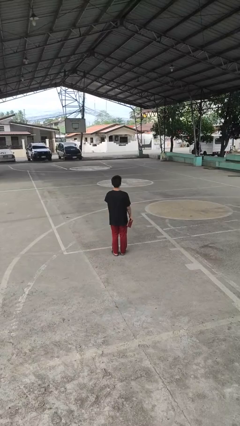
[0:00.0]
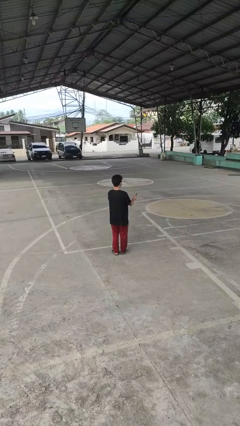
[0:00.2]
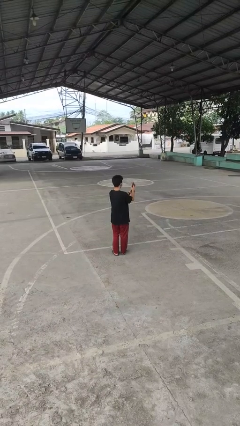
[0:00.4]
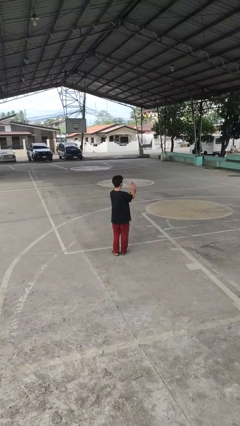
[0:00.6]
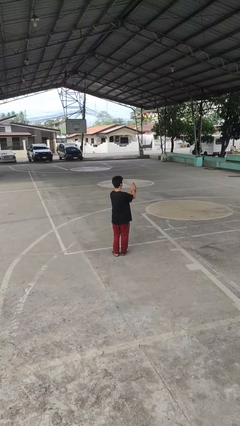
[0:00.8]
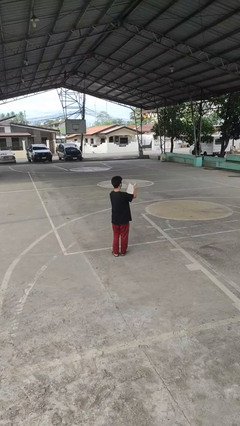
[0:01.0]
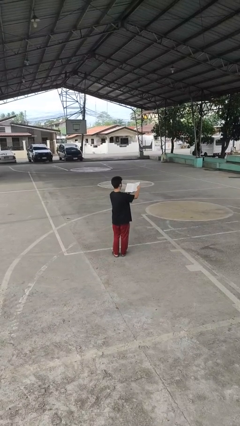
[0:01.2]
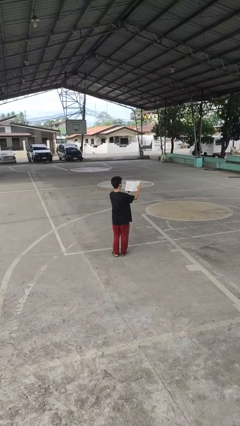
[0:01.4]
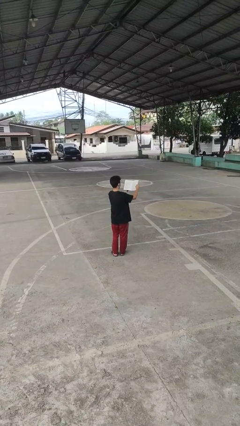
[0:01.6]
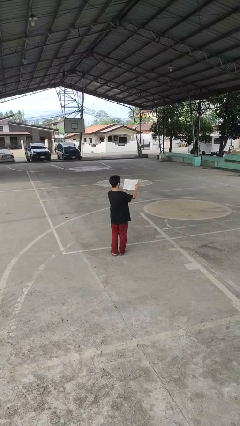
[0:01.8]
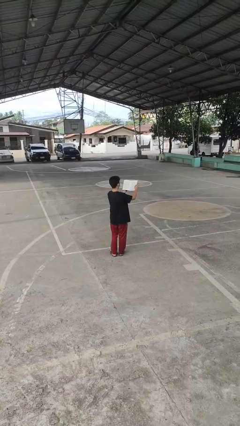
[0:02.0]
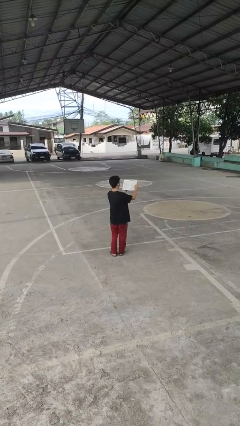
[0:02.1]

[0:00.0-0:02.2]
person reads book

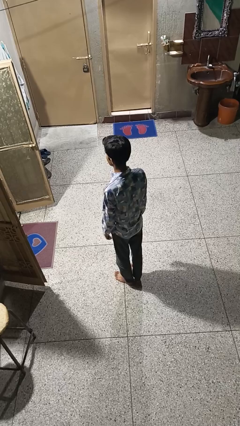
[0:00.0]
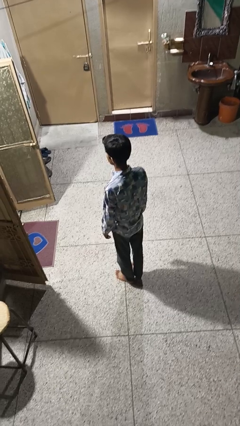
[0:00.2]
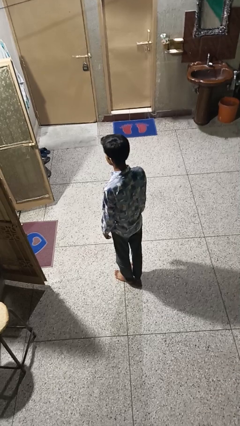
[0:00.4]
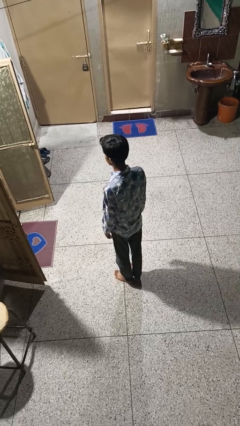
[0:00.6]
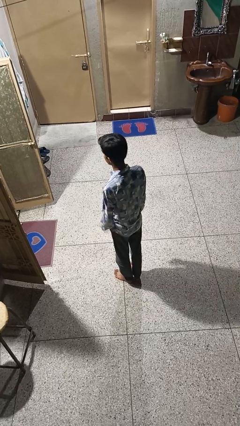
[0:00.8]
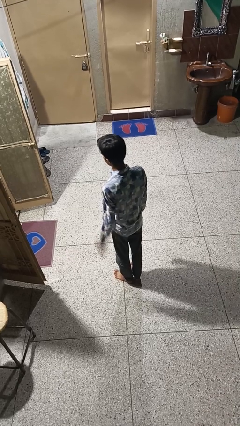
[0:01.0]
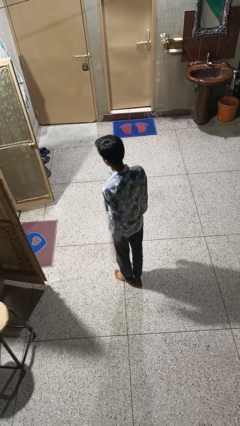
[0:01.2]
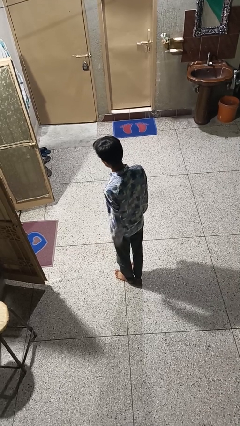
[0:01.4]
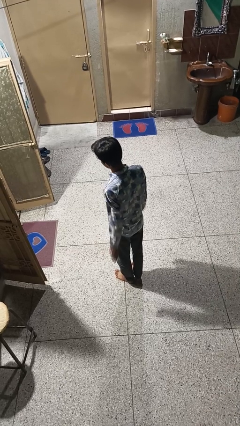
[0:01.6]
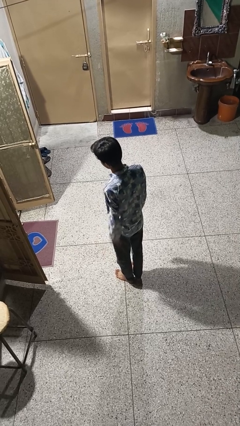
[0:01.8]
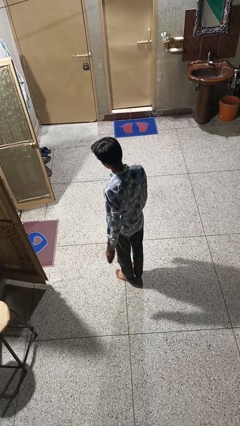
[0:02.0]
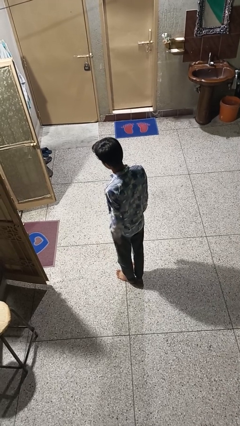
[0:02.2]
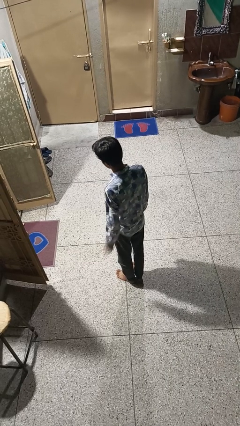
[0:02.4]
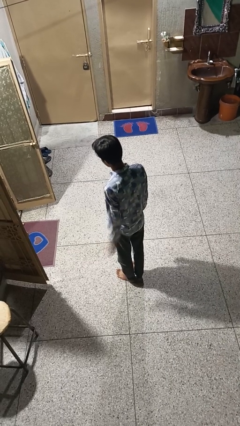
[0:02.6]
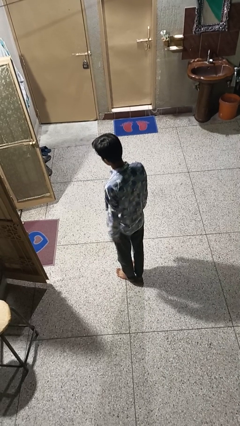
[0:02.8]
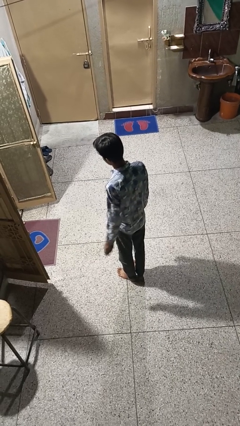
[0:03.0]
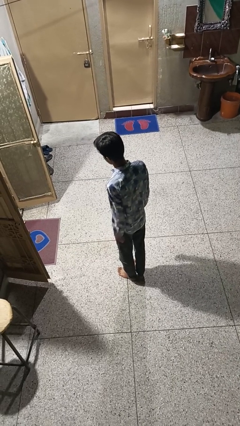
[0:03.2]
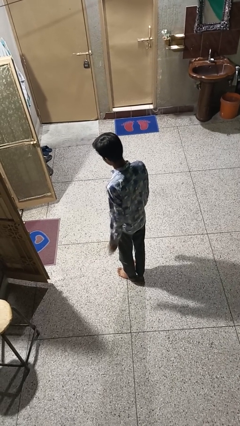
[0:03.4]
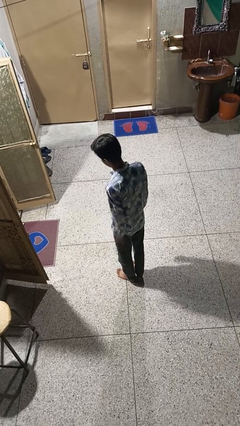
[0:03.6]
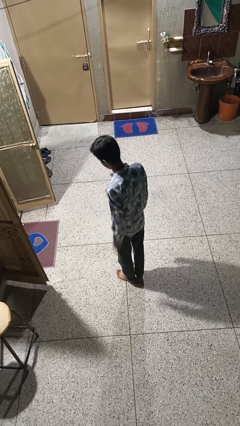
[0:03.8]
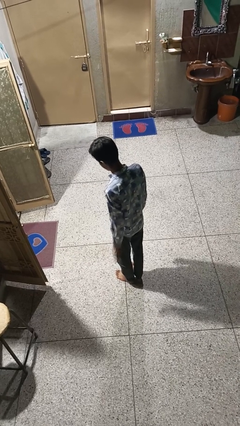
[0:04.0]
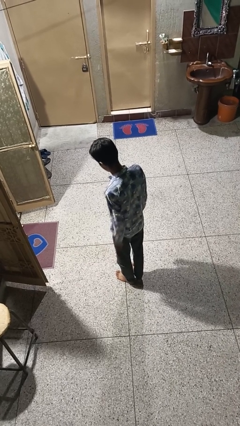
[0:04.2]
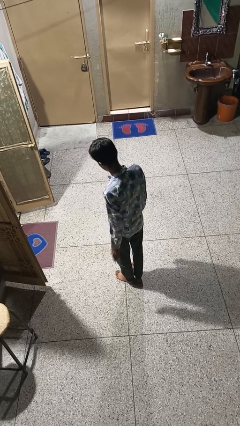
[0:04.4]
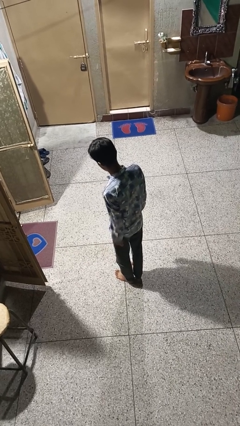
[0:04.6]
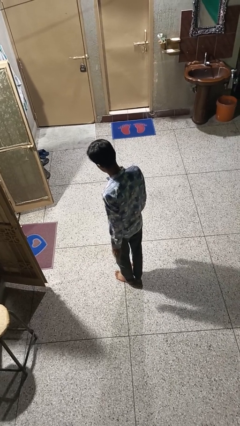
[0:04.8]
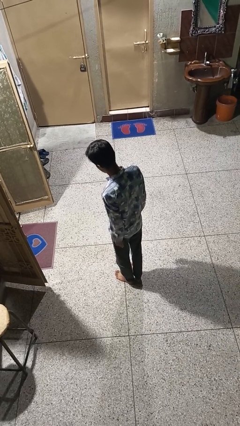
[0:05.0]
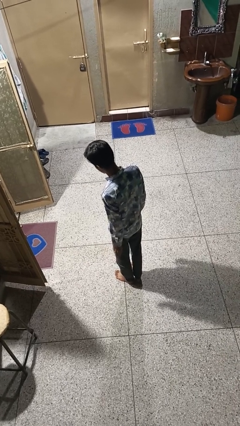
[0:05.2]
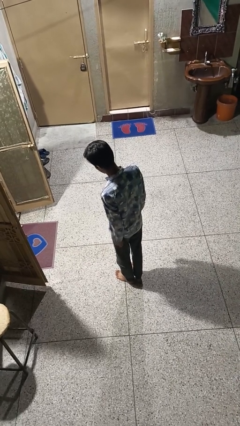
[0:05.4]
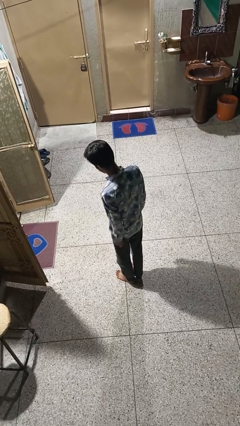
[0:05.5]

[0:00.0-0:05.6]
person slaps hands on thighs

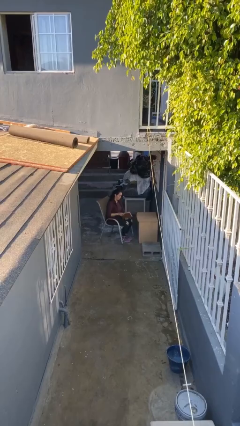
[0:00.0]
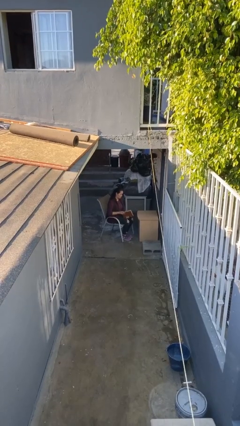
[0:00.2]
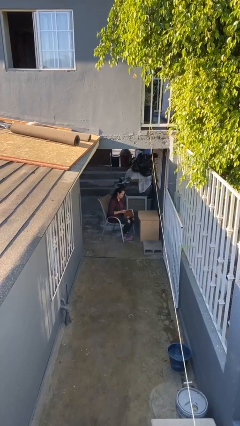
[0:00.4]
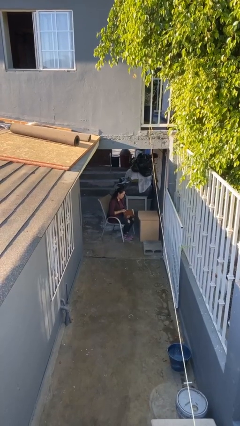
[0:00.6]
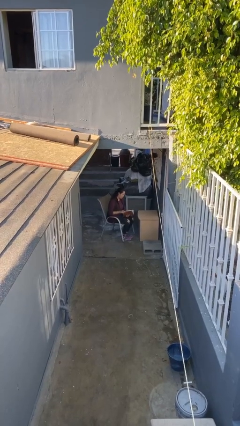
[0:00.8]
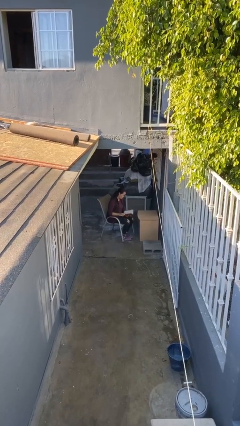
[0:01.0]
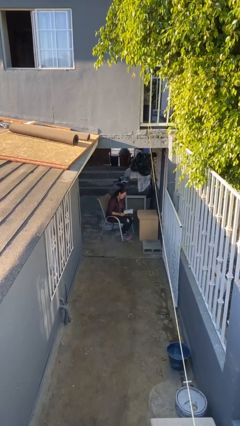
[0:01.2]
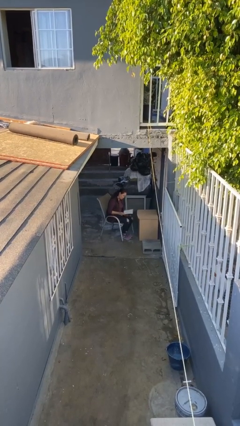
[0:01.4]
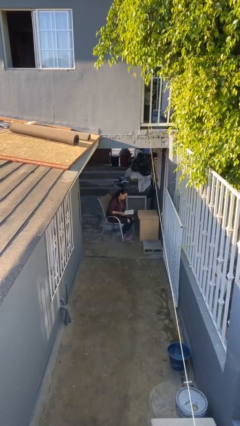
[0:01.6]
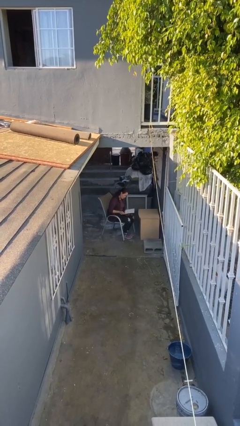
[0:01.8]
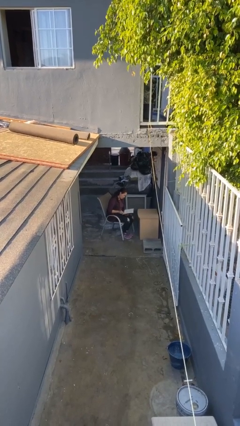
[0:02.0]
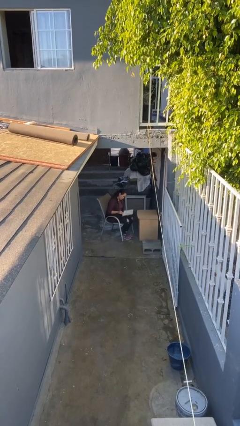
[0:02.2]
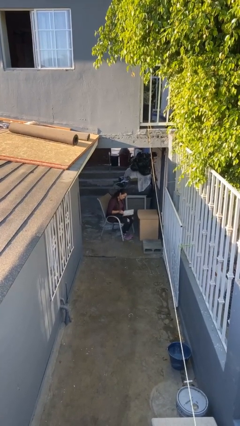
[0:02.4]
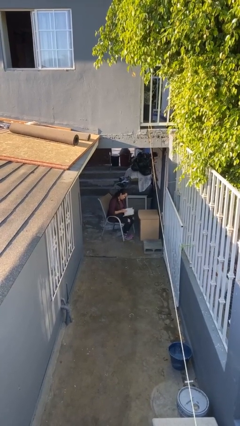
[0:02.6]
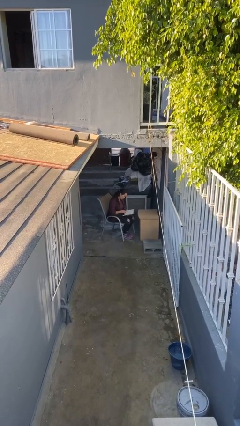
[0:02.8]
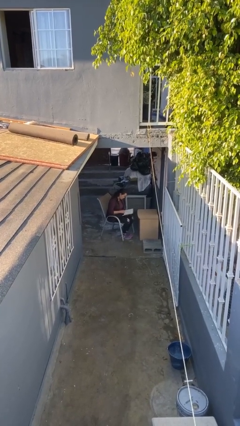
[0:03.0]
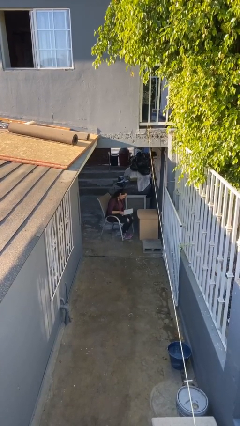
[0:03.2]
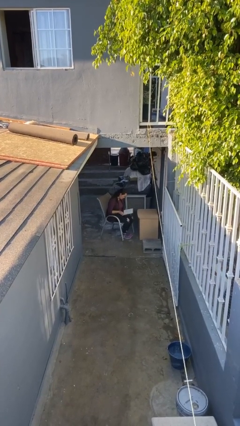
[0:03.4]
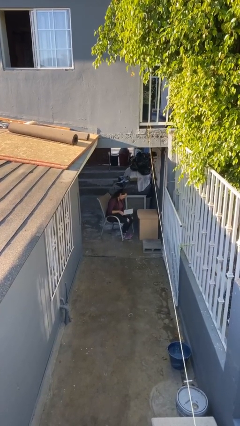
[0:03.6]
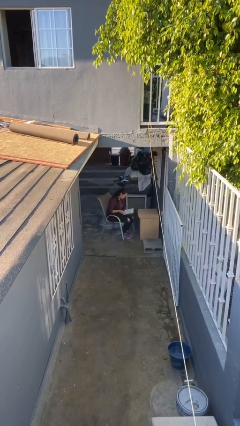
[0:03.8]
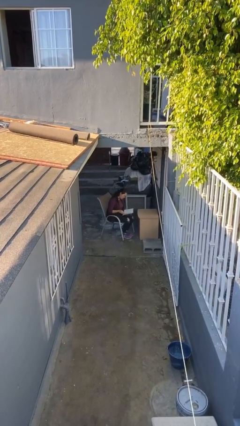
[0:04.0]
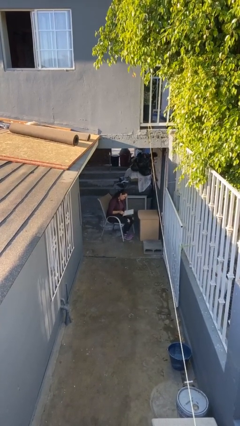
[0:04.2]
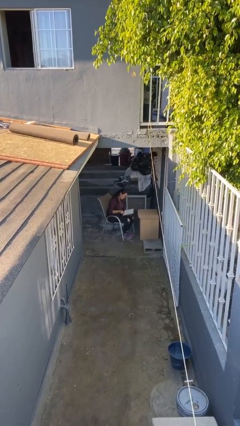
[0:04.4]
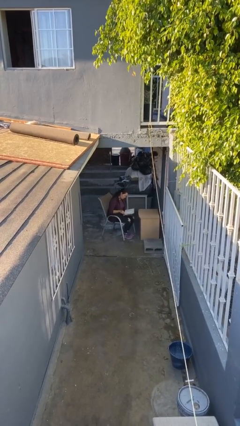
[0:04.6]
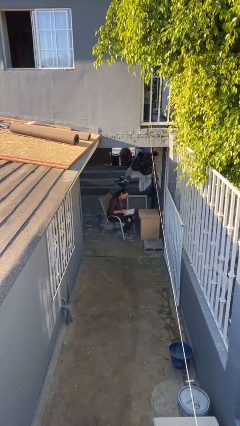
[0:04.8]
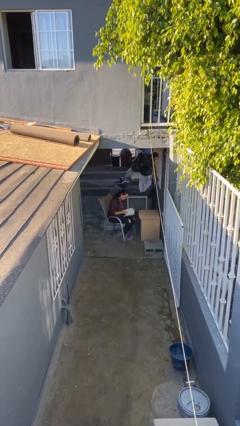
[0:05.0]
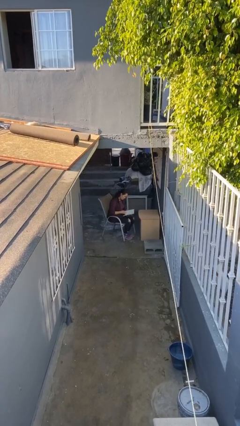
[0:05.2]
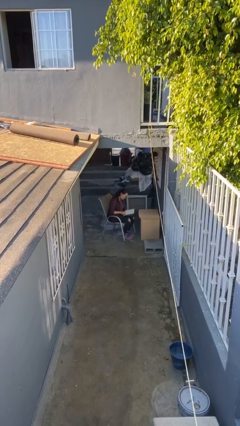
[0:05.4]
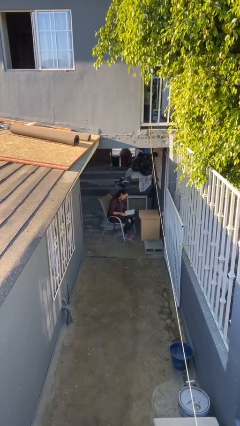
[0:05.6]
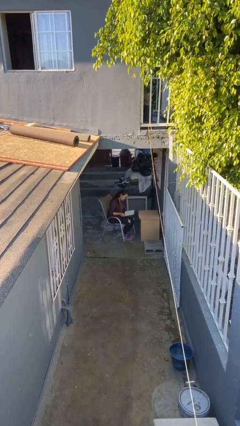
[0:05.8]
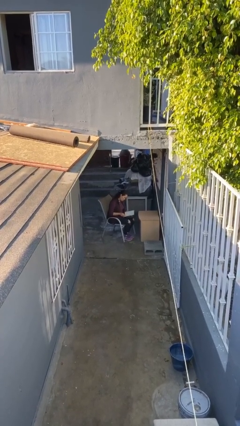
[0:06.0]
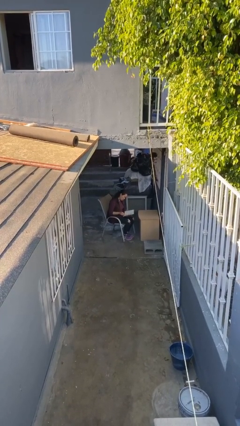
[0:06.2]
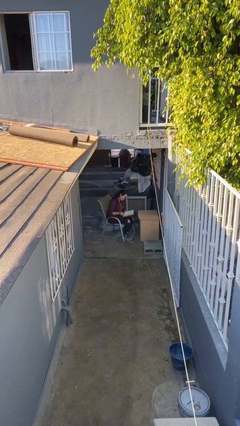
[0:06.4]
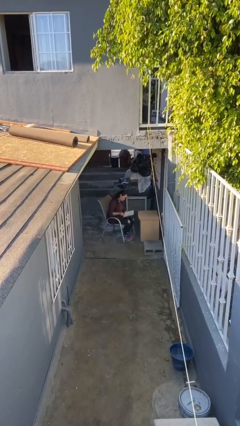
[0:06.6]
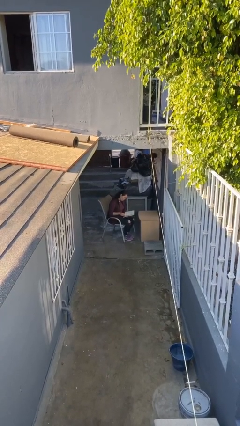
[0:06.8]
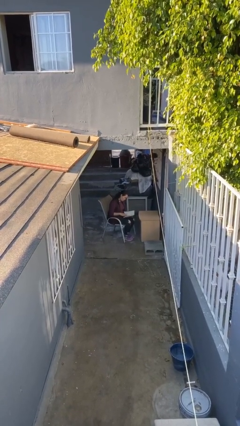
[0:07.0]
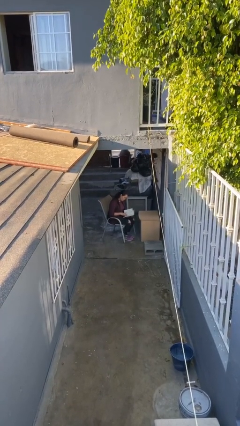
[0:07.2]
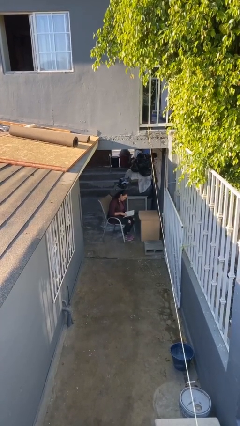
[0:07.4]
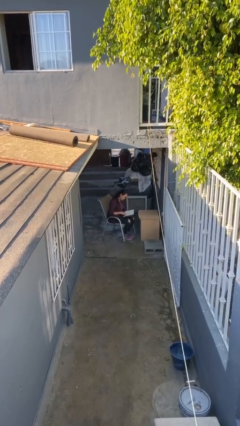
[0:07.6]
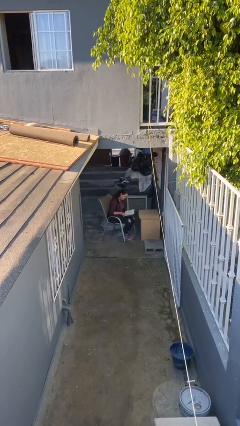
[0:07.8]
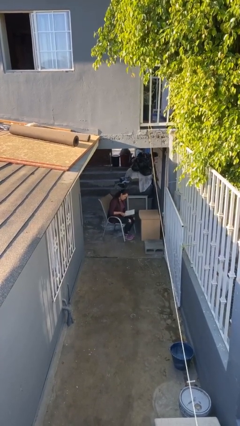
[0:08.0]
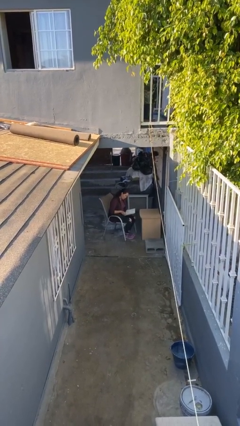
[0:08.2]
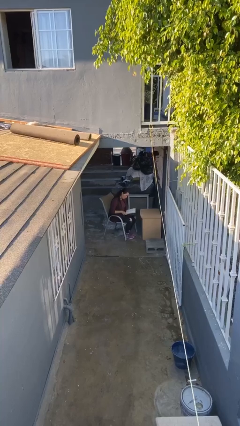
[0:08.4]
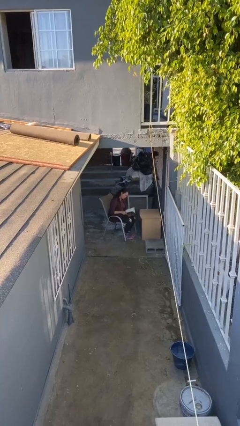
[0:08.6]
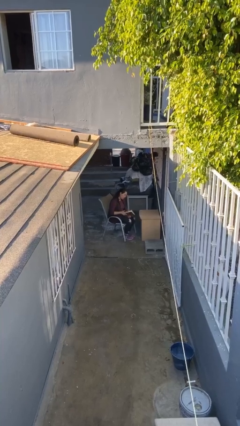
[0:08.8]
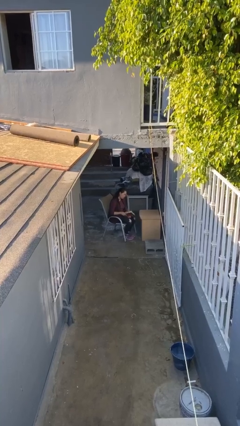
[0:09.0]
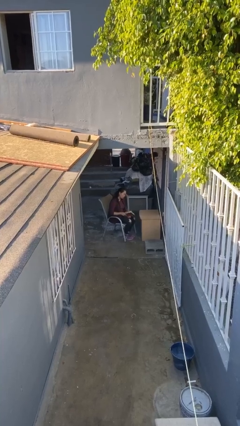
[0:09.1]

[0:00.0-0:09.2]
person reads document

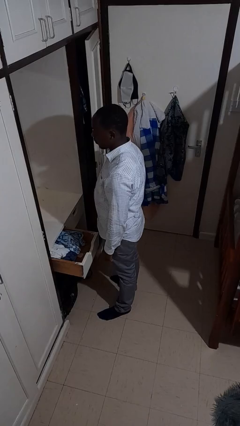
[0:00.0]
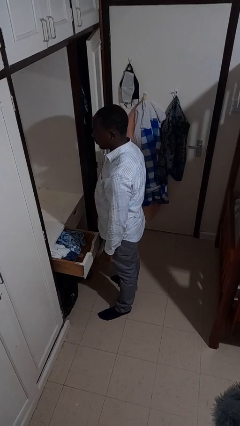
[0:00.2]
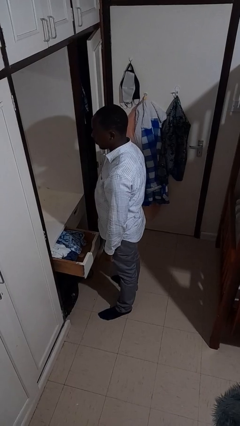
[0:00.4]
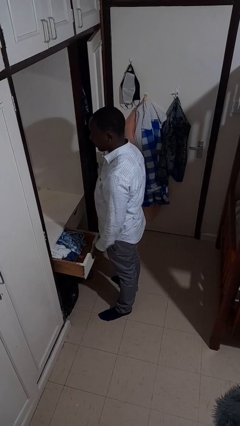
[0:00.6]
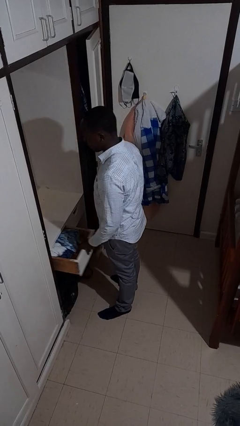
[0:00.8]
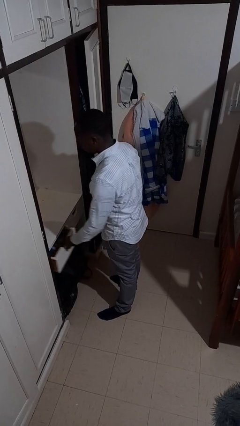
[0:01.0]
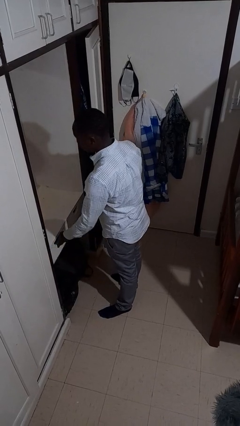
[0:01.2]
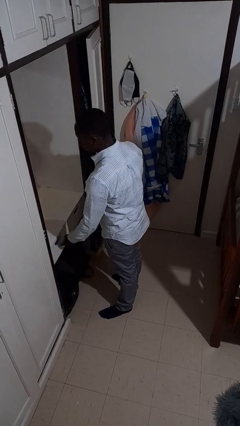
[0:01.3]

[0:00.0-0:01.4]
person closes dresser drawer
